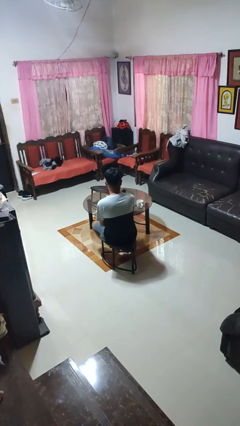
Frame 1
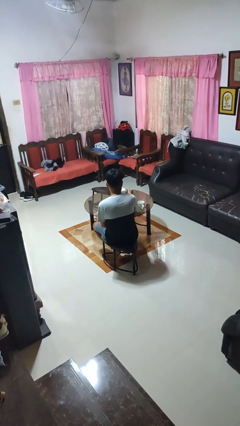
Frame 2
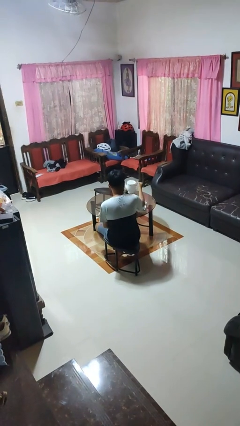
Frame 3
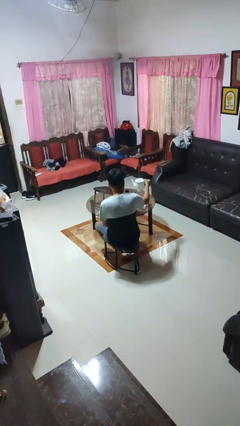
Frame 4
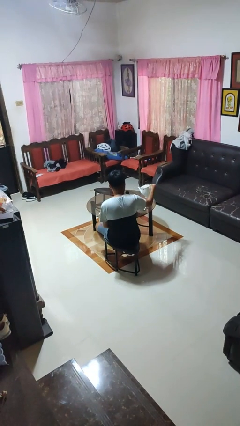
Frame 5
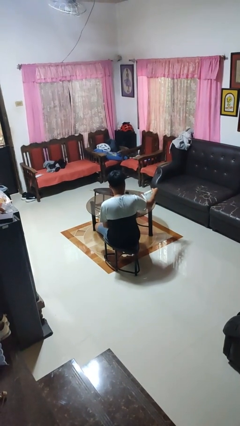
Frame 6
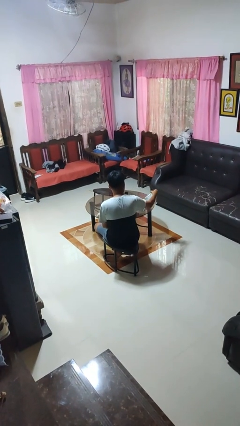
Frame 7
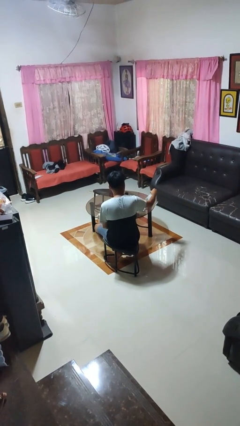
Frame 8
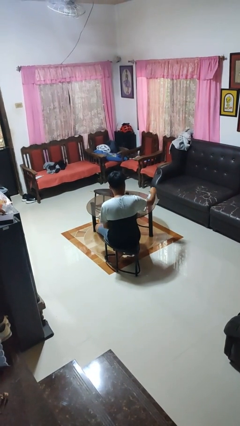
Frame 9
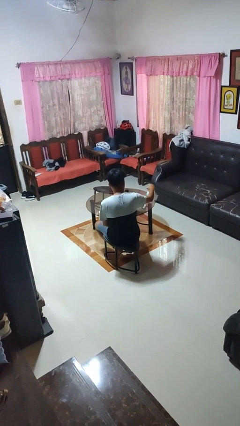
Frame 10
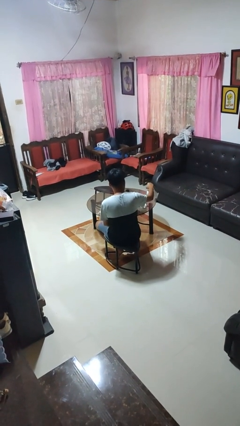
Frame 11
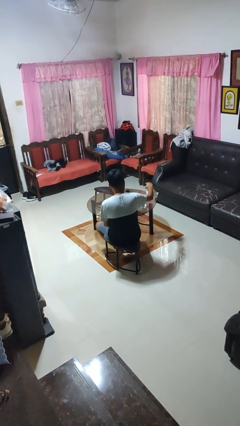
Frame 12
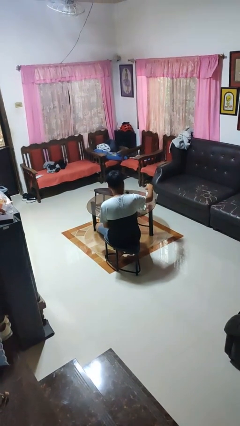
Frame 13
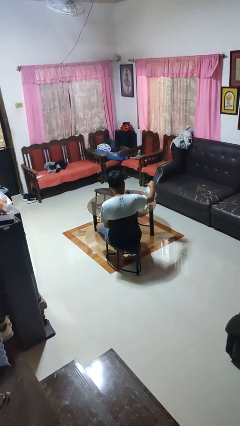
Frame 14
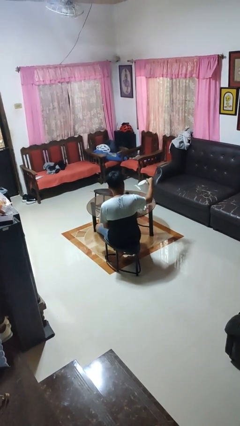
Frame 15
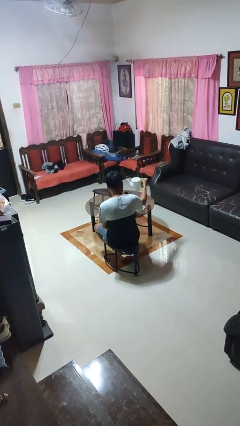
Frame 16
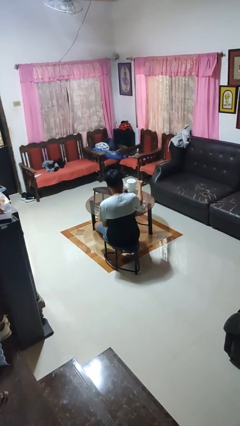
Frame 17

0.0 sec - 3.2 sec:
person pours coffee into mug

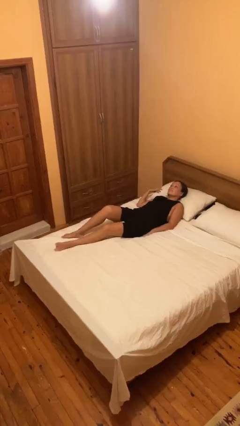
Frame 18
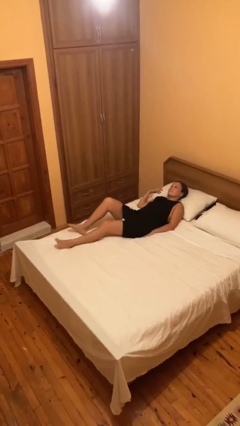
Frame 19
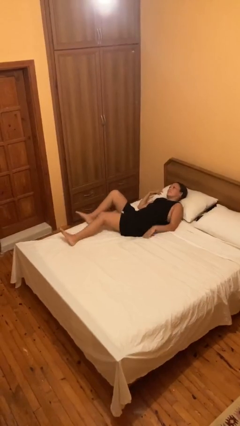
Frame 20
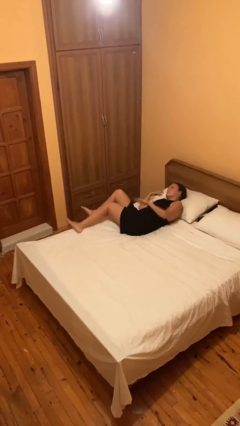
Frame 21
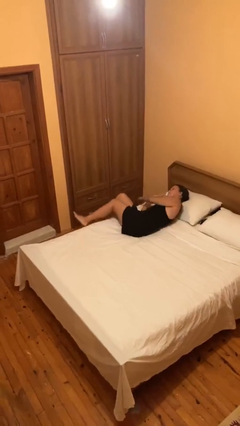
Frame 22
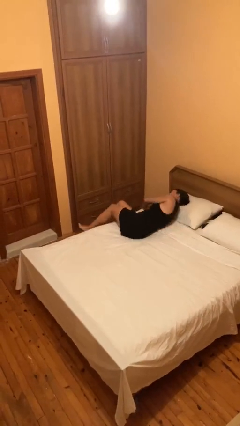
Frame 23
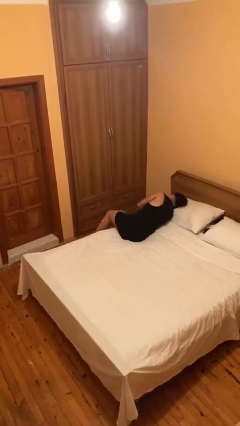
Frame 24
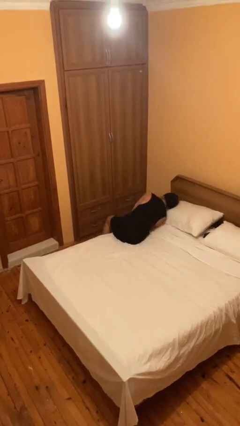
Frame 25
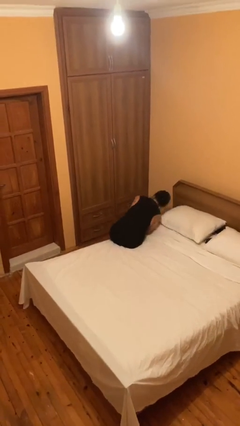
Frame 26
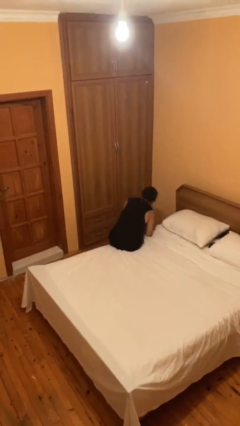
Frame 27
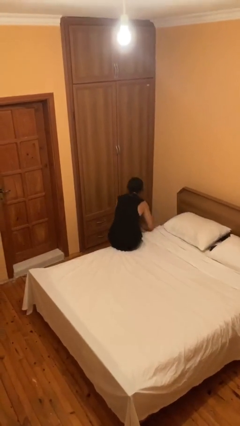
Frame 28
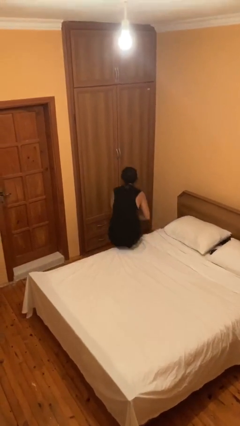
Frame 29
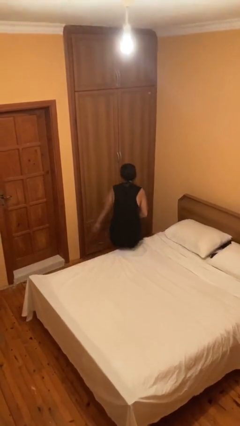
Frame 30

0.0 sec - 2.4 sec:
person stands up

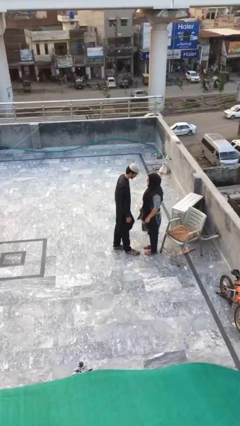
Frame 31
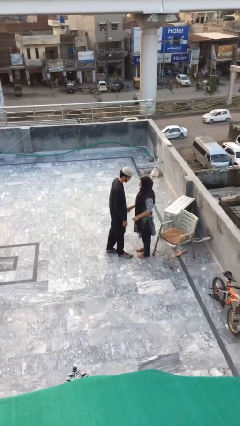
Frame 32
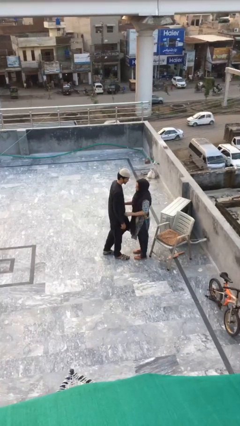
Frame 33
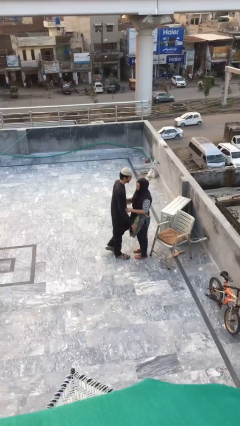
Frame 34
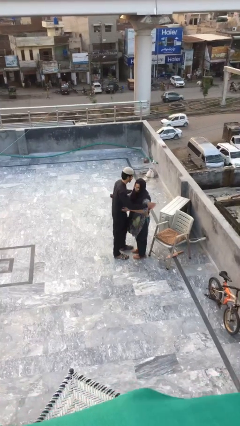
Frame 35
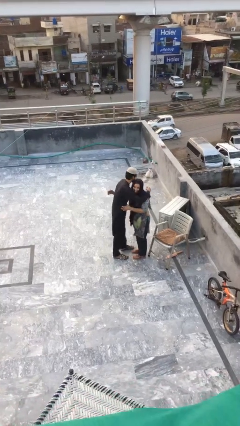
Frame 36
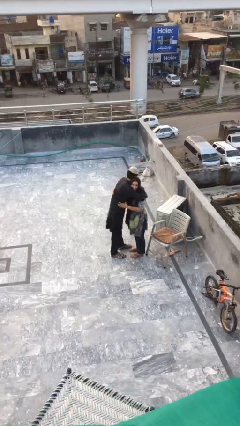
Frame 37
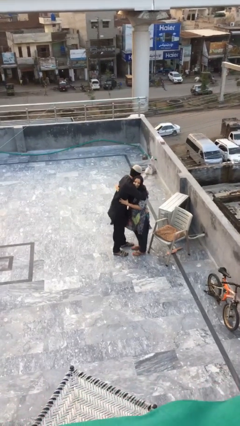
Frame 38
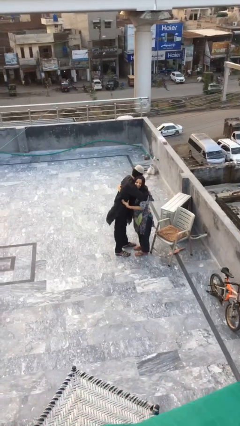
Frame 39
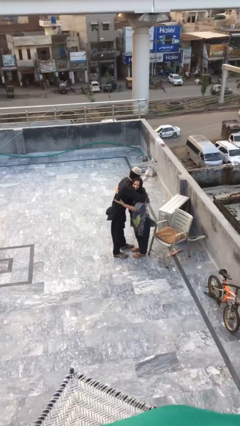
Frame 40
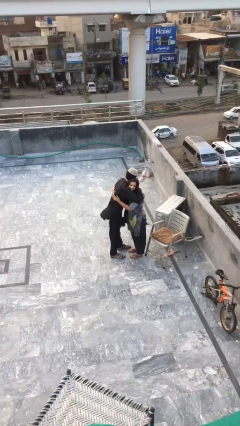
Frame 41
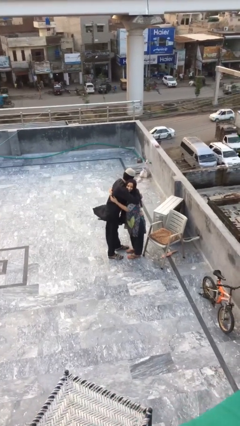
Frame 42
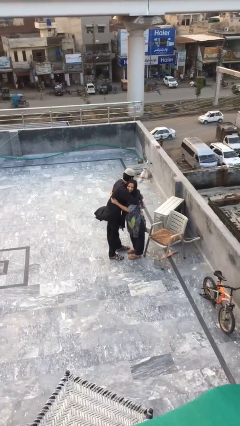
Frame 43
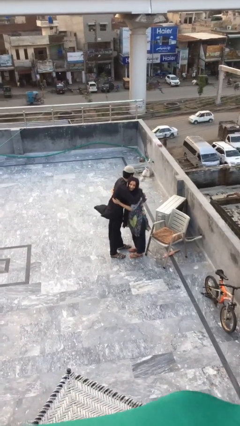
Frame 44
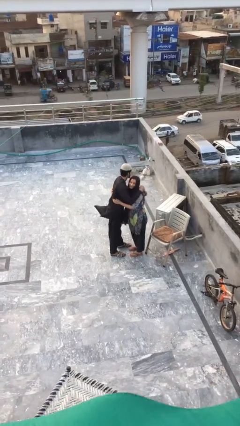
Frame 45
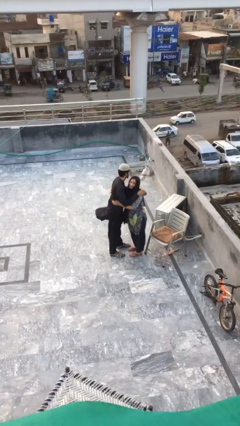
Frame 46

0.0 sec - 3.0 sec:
person embraces person

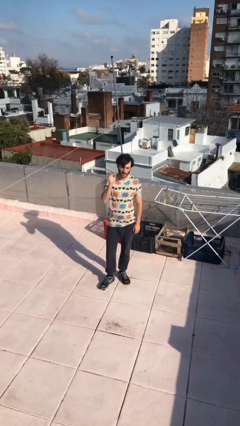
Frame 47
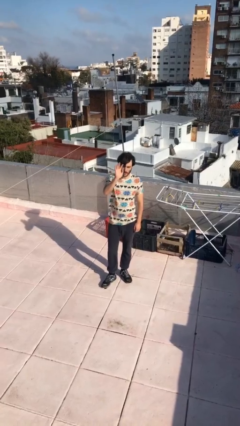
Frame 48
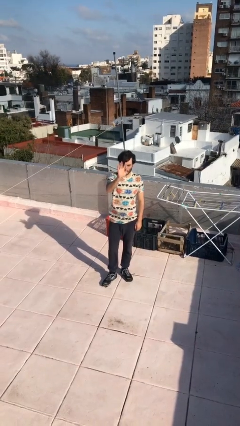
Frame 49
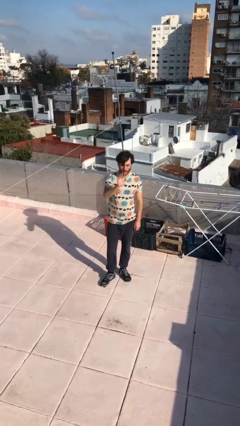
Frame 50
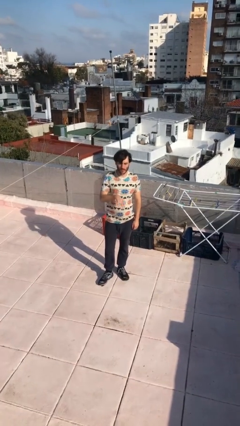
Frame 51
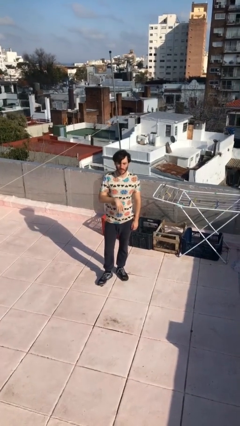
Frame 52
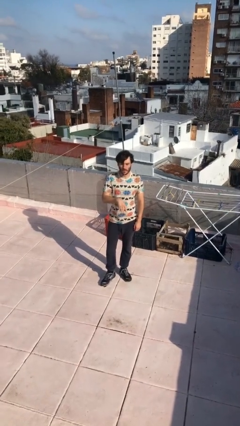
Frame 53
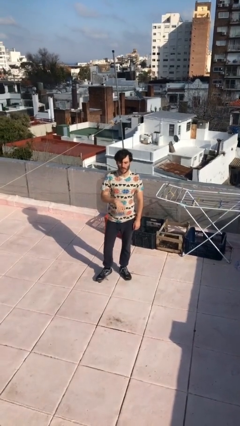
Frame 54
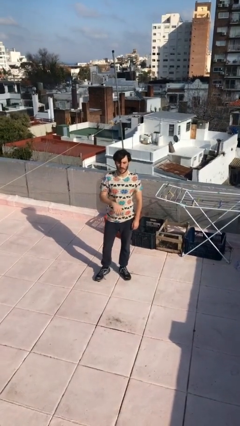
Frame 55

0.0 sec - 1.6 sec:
person gestures swipe down

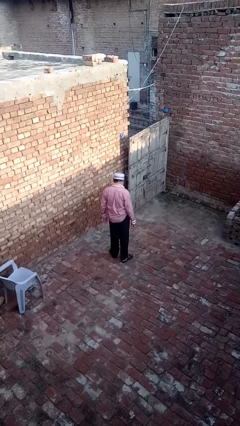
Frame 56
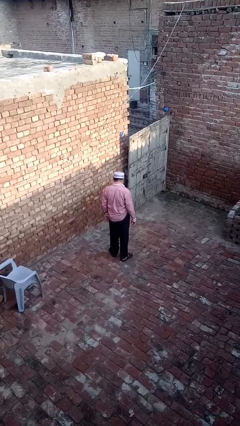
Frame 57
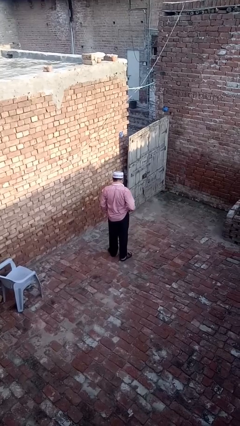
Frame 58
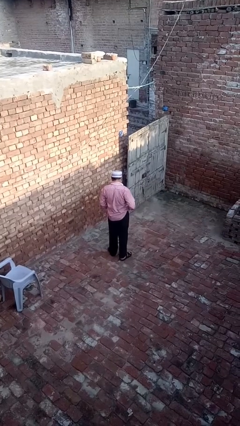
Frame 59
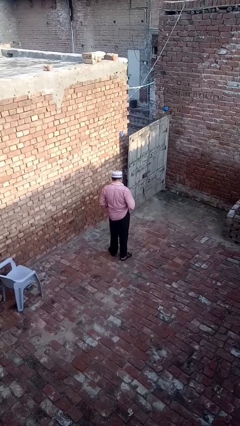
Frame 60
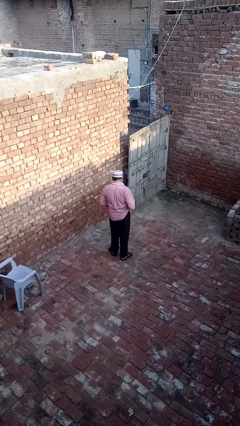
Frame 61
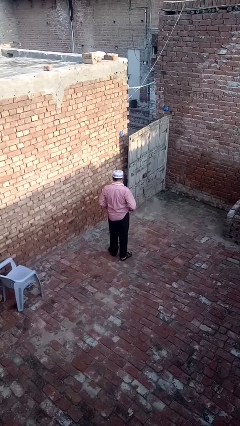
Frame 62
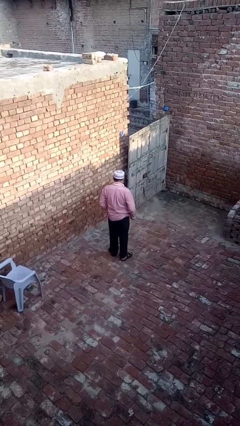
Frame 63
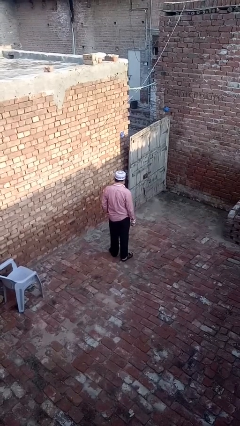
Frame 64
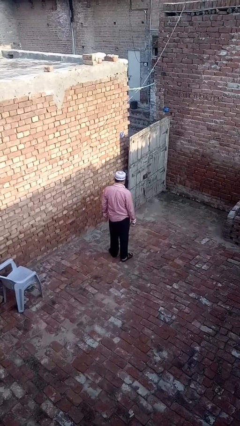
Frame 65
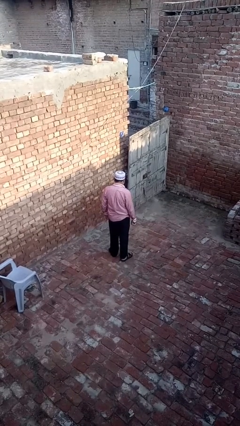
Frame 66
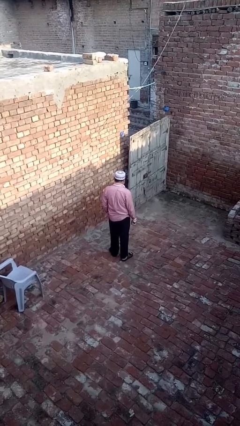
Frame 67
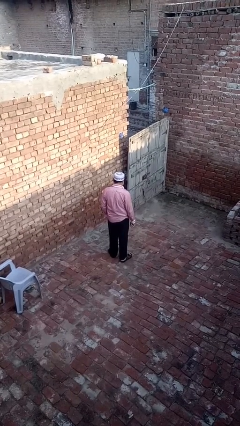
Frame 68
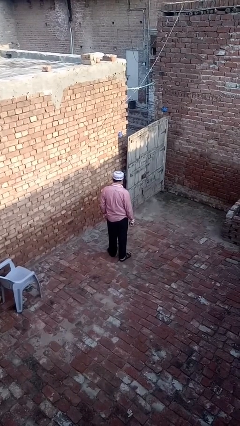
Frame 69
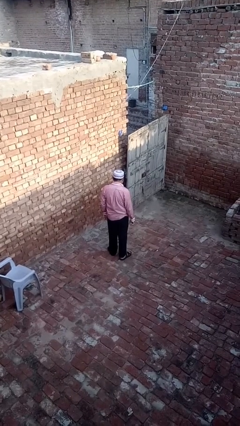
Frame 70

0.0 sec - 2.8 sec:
person untucks shirt

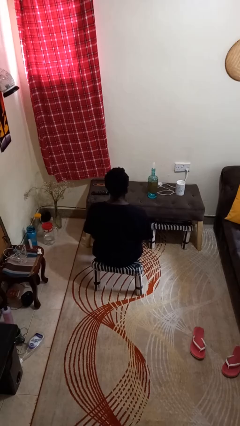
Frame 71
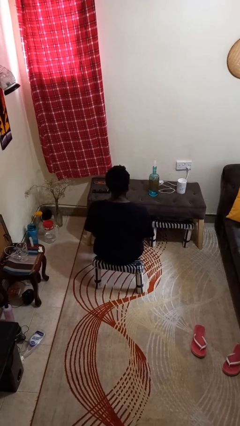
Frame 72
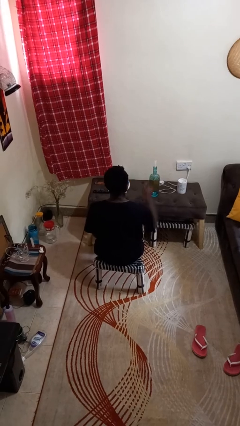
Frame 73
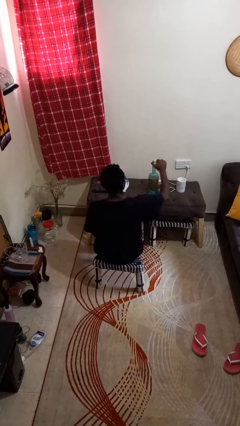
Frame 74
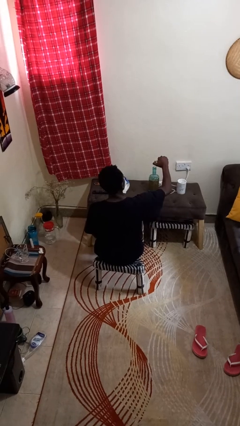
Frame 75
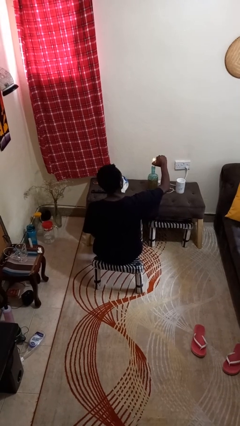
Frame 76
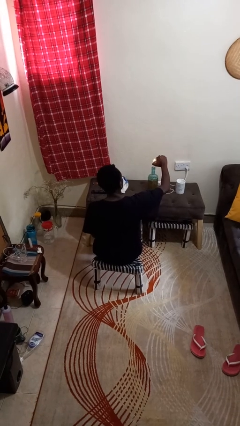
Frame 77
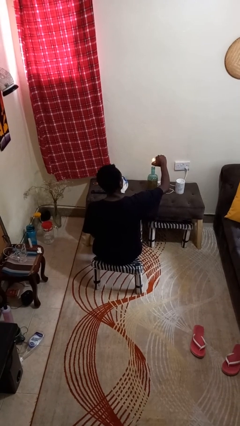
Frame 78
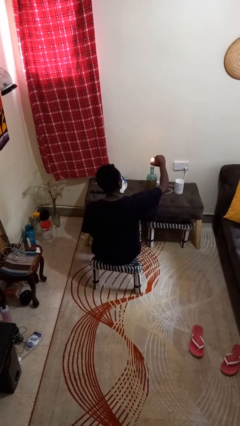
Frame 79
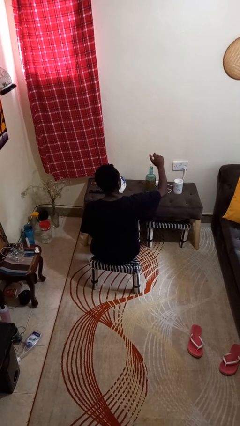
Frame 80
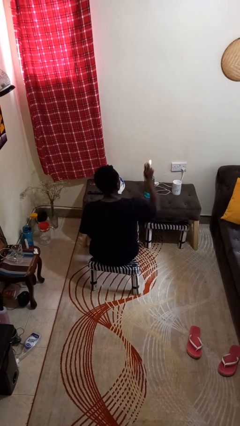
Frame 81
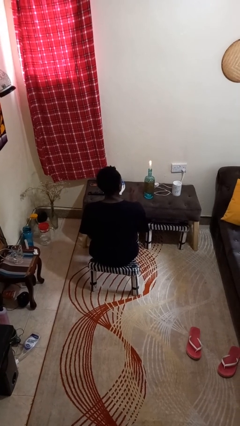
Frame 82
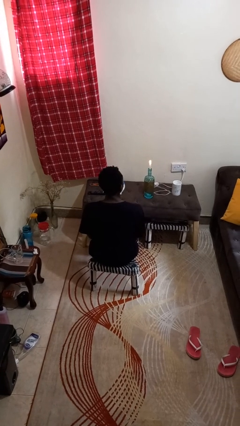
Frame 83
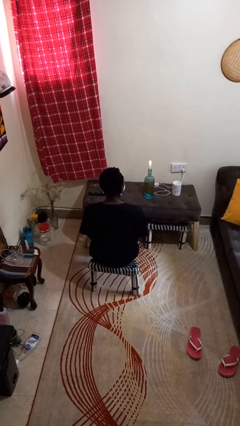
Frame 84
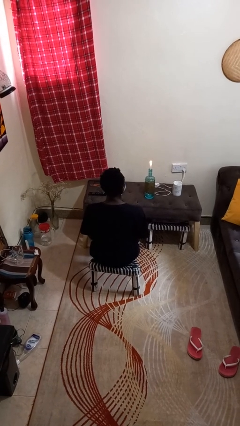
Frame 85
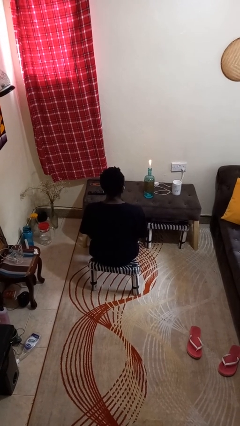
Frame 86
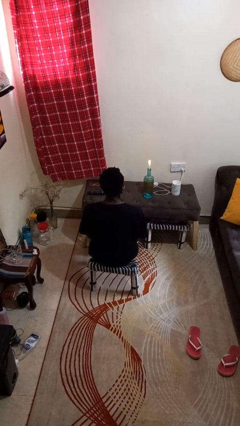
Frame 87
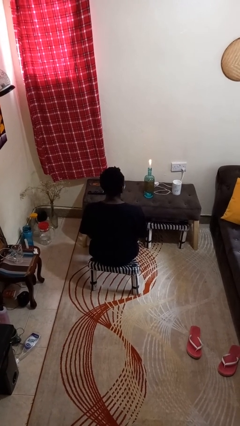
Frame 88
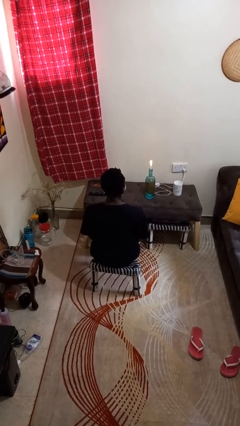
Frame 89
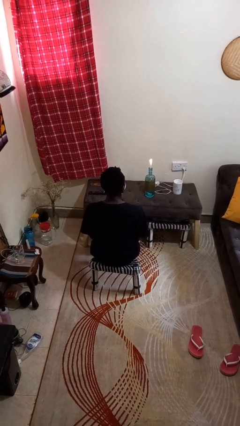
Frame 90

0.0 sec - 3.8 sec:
person lights candle

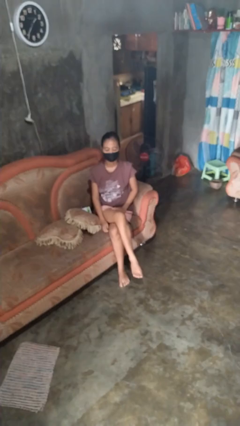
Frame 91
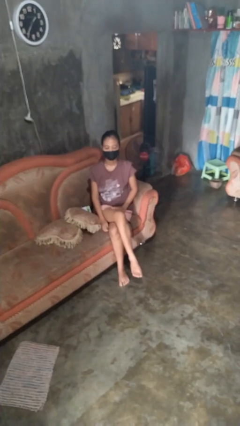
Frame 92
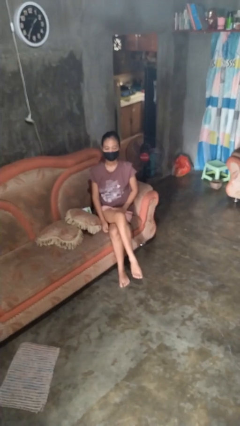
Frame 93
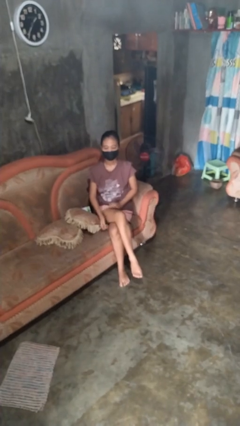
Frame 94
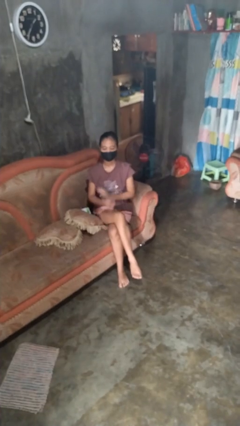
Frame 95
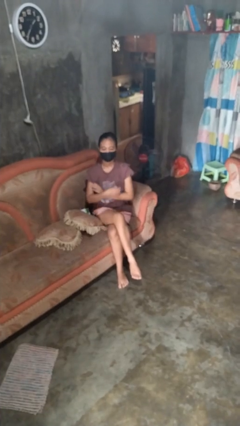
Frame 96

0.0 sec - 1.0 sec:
person crosses arms
